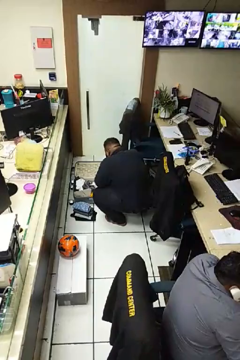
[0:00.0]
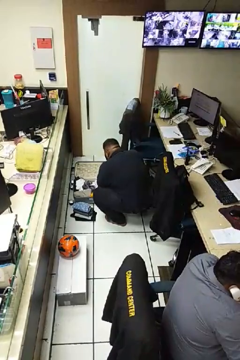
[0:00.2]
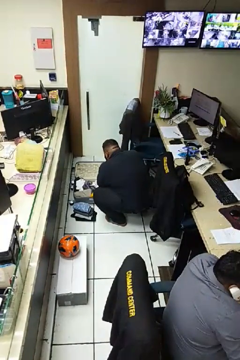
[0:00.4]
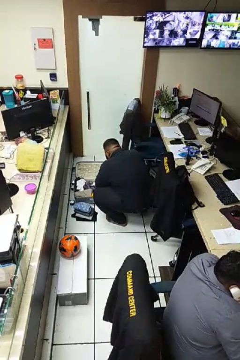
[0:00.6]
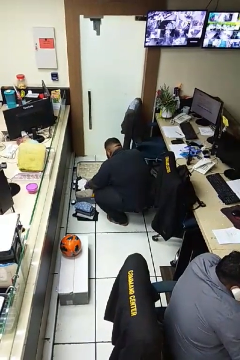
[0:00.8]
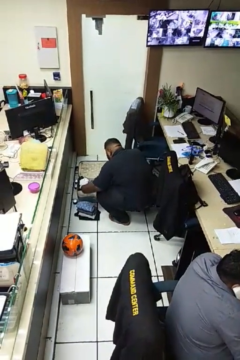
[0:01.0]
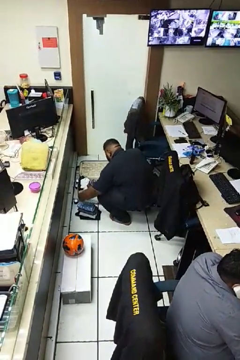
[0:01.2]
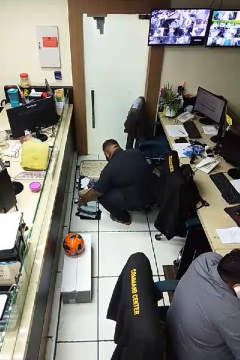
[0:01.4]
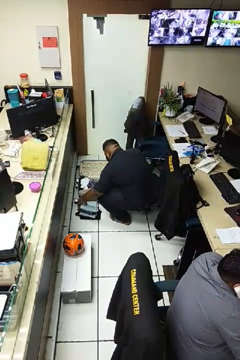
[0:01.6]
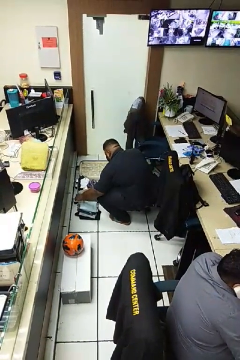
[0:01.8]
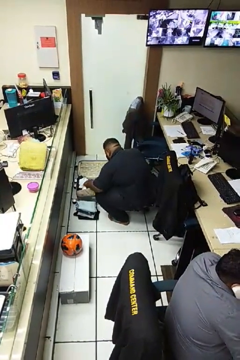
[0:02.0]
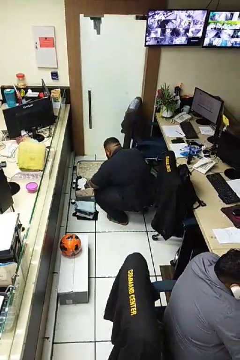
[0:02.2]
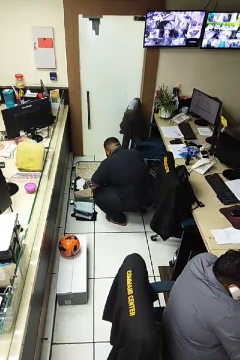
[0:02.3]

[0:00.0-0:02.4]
person unloads clothes from suitcase

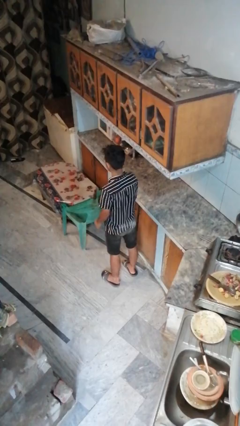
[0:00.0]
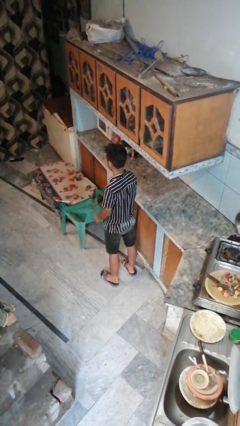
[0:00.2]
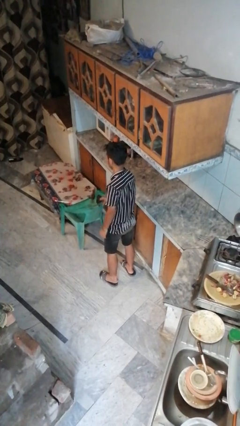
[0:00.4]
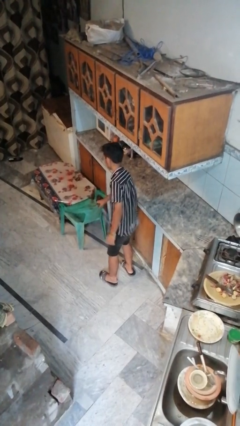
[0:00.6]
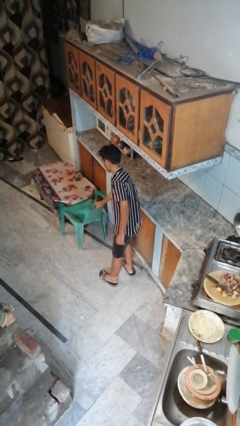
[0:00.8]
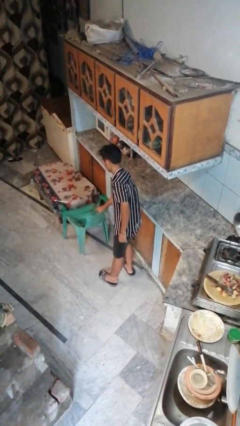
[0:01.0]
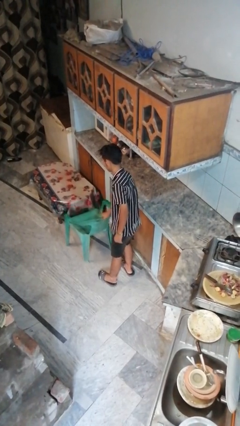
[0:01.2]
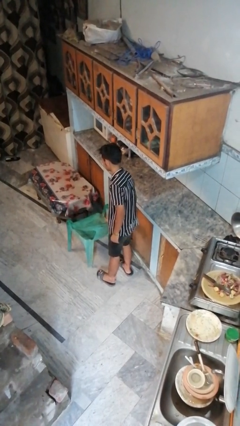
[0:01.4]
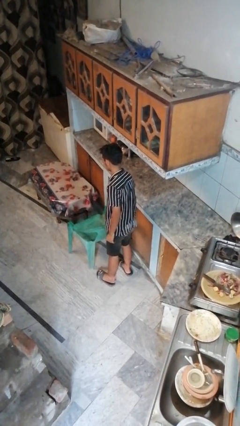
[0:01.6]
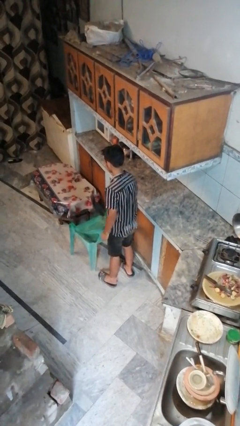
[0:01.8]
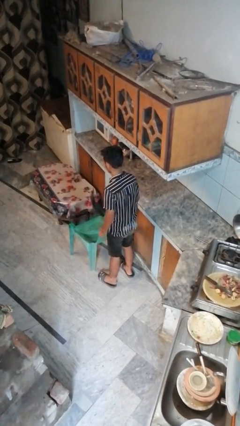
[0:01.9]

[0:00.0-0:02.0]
person pulls out chair

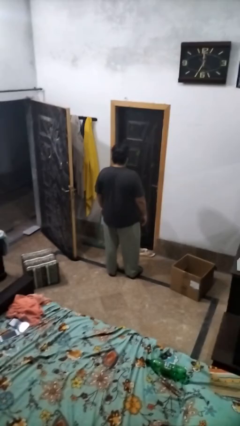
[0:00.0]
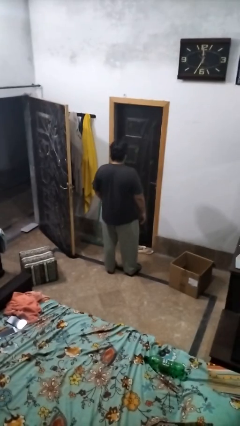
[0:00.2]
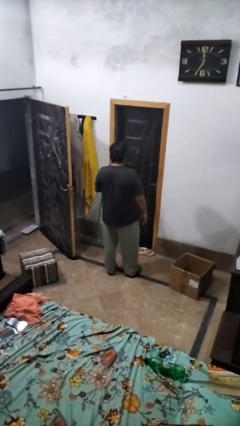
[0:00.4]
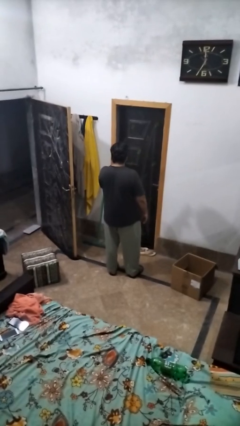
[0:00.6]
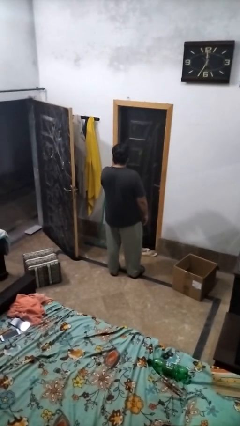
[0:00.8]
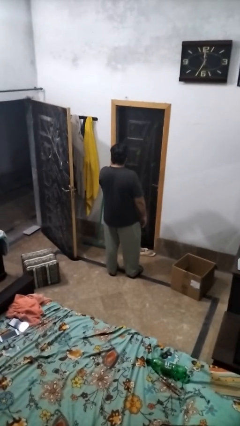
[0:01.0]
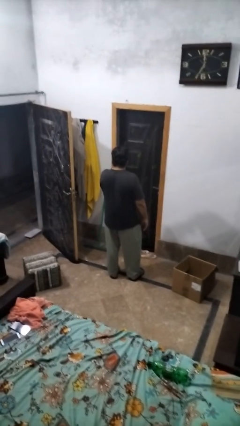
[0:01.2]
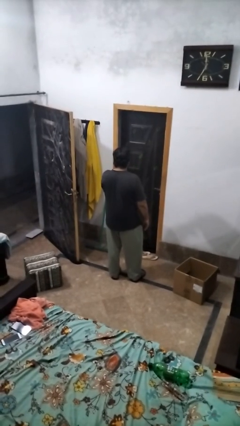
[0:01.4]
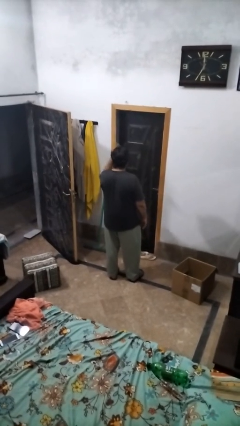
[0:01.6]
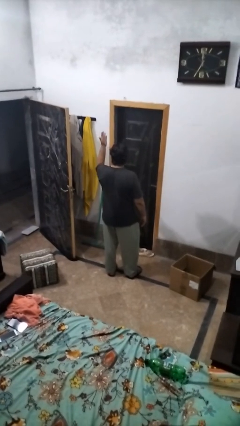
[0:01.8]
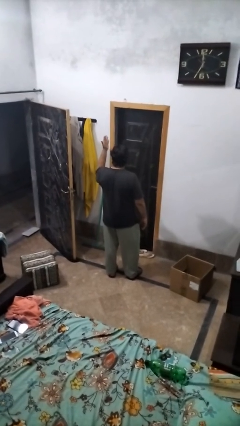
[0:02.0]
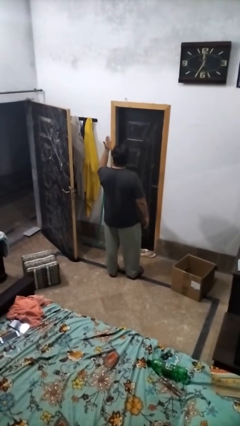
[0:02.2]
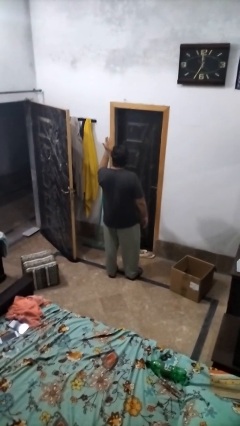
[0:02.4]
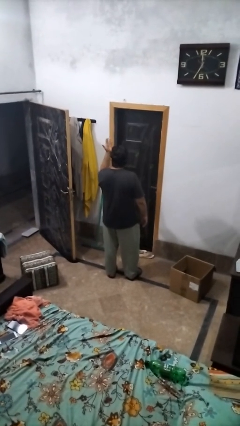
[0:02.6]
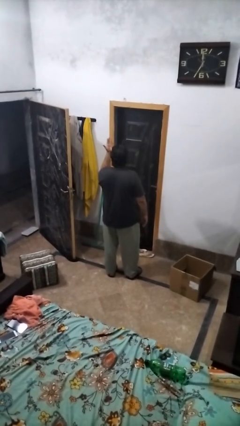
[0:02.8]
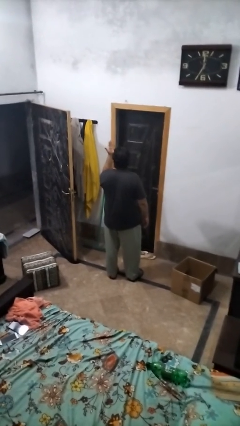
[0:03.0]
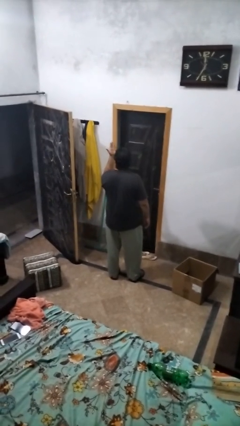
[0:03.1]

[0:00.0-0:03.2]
person gestures blow kiss

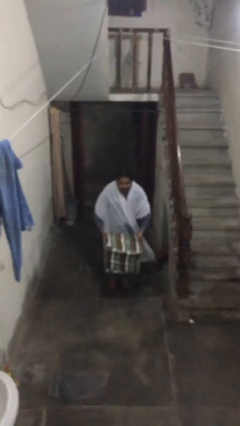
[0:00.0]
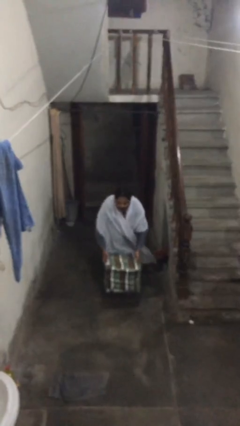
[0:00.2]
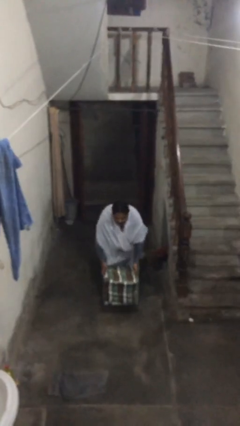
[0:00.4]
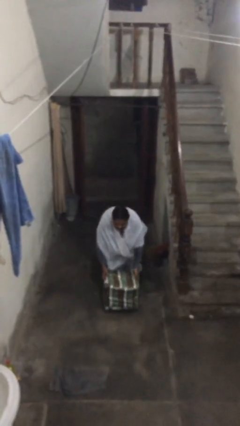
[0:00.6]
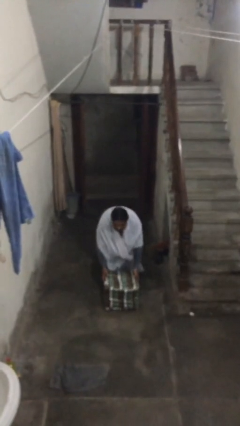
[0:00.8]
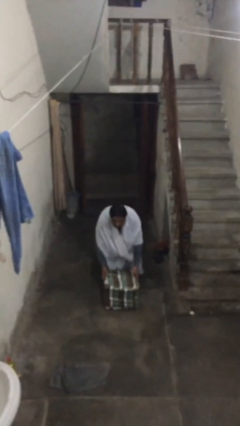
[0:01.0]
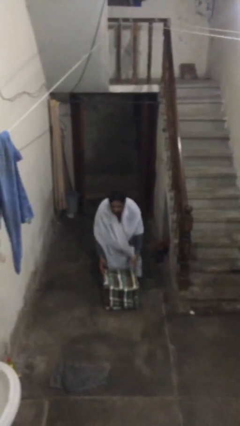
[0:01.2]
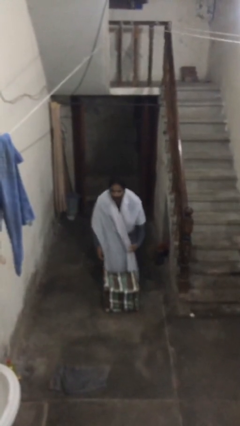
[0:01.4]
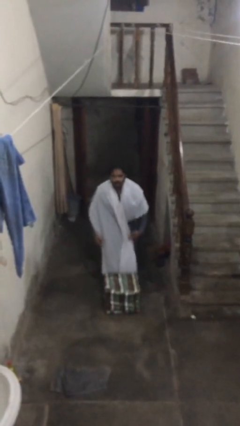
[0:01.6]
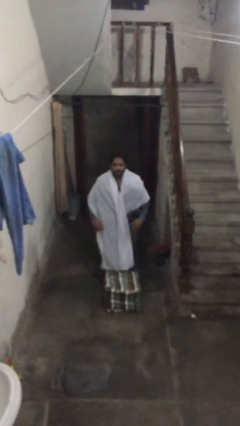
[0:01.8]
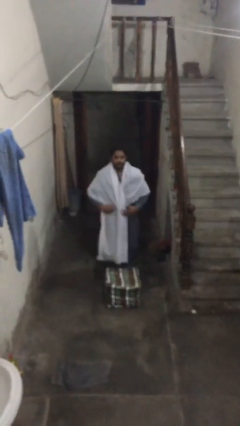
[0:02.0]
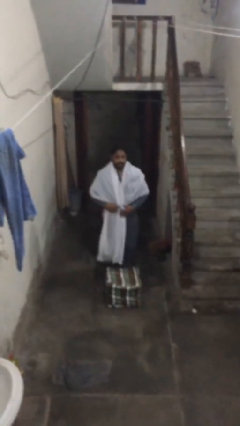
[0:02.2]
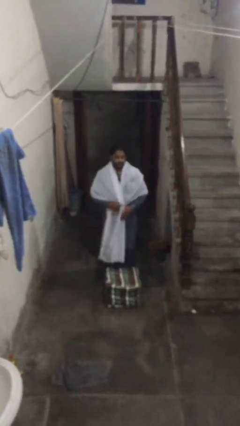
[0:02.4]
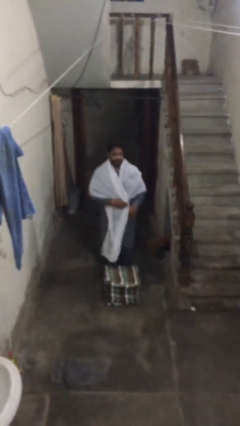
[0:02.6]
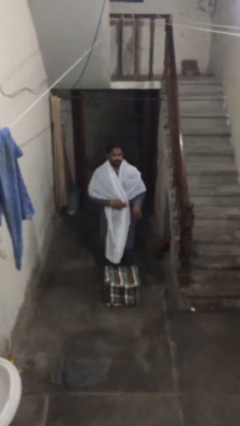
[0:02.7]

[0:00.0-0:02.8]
person puts down object on floor

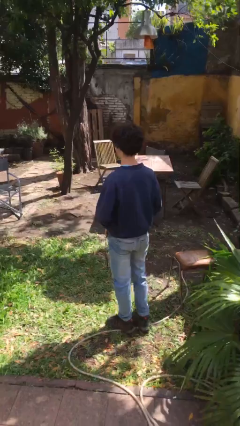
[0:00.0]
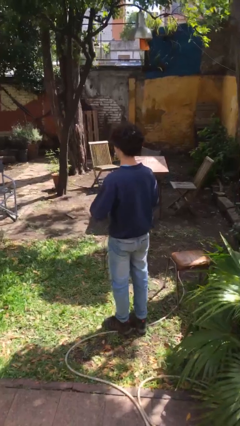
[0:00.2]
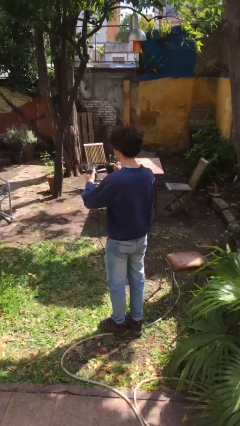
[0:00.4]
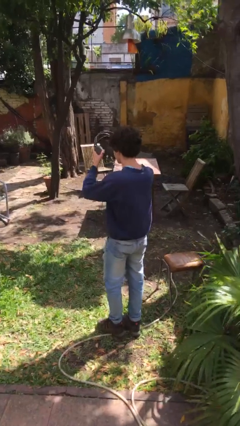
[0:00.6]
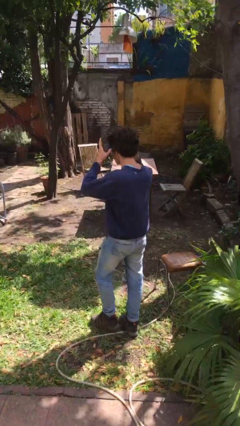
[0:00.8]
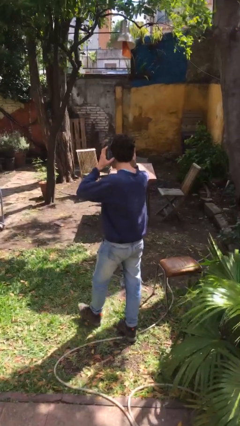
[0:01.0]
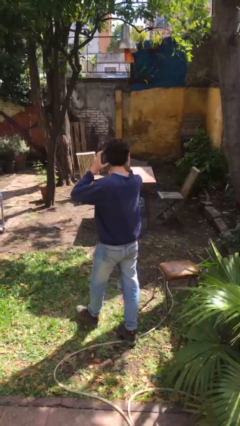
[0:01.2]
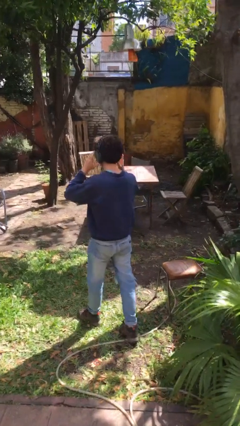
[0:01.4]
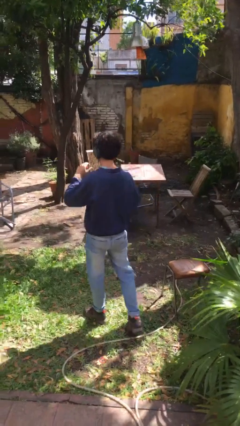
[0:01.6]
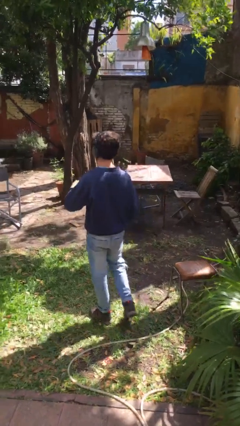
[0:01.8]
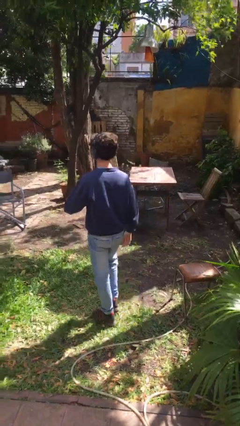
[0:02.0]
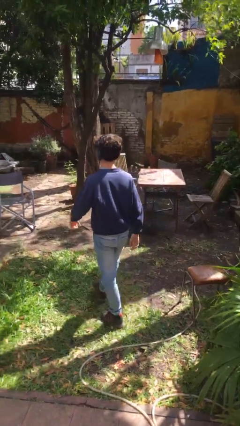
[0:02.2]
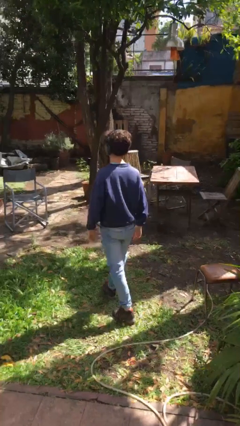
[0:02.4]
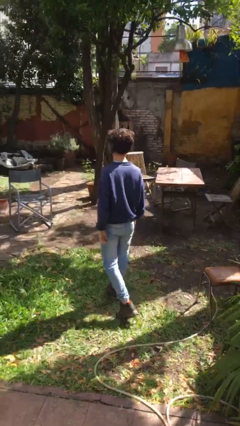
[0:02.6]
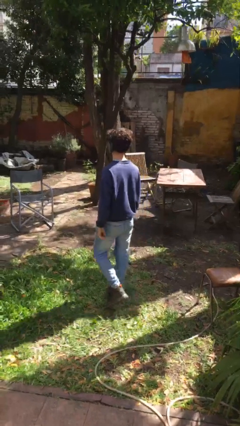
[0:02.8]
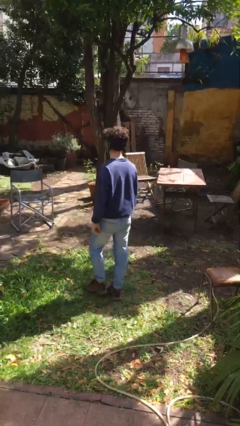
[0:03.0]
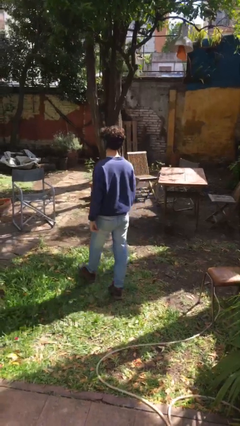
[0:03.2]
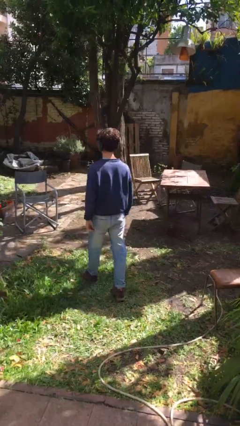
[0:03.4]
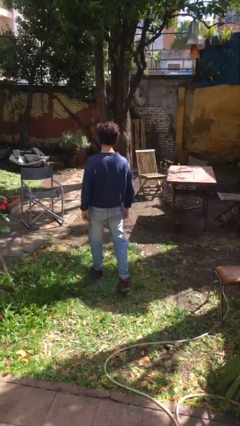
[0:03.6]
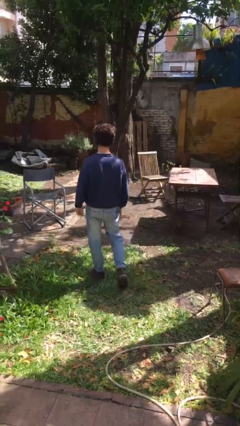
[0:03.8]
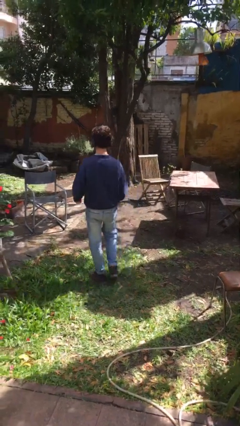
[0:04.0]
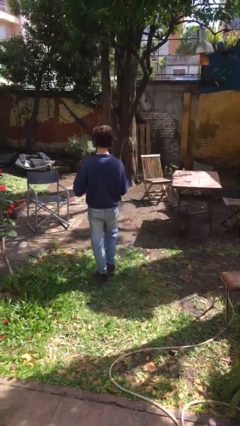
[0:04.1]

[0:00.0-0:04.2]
person puts on headphones

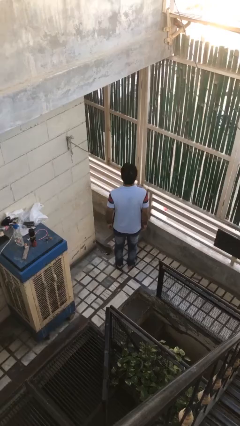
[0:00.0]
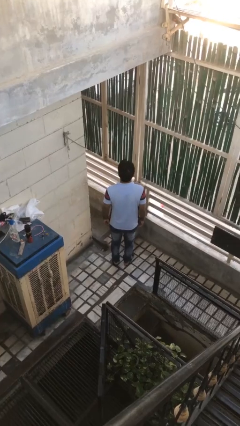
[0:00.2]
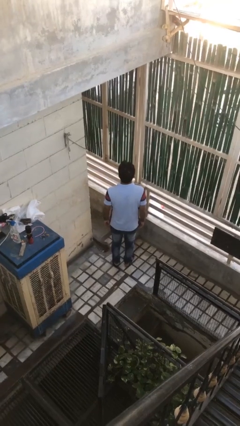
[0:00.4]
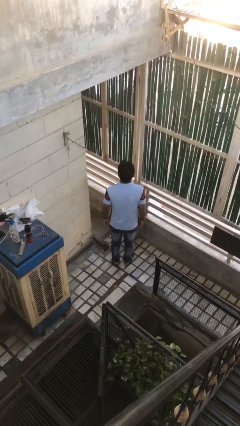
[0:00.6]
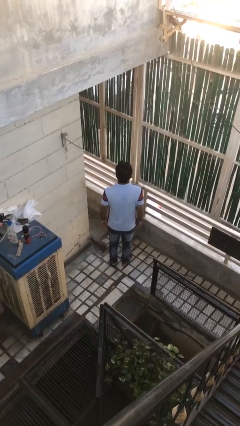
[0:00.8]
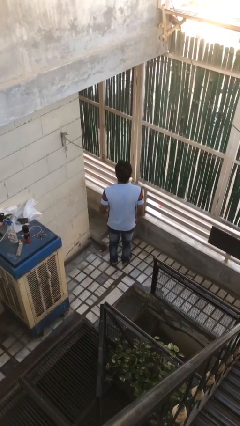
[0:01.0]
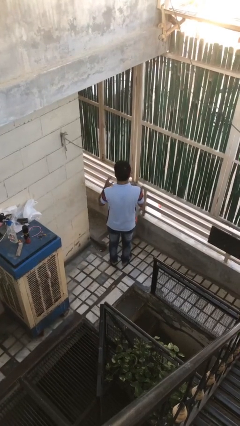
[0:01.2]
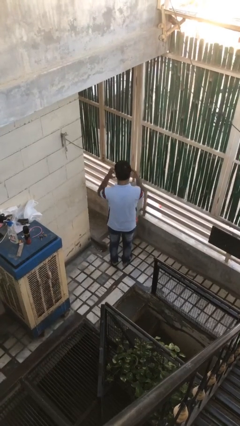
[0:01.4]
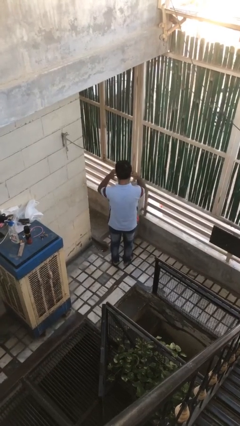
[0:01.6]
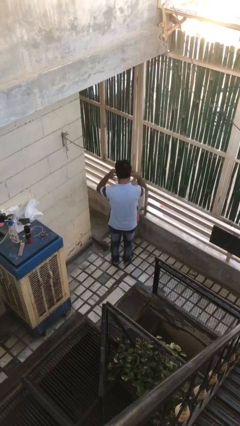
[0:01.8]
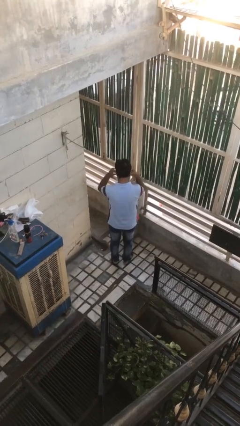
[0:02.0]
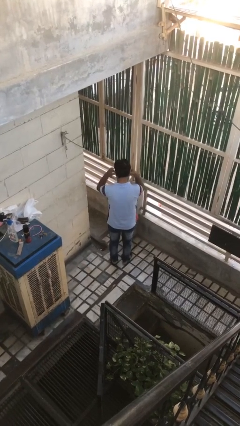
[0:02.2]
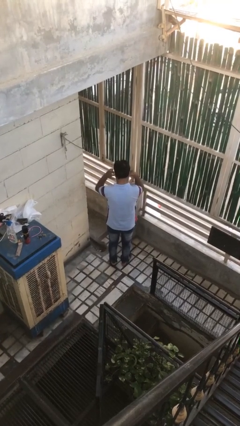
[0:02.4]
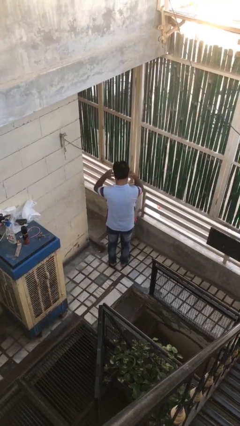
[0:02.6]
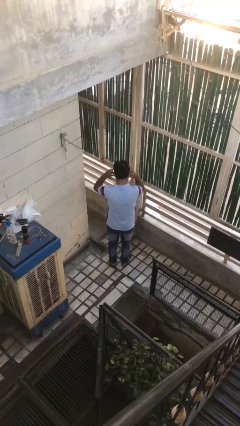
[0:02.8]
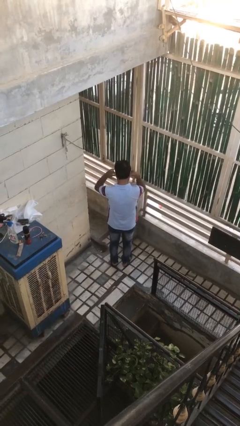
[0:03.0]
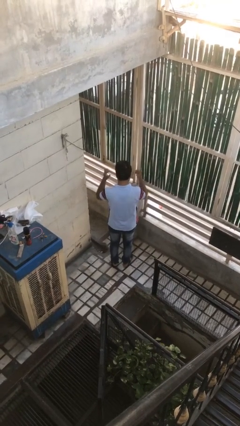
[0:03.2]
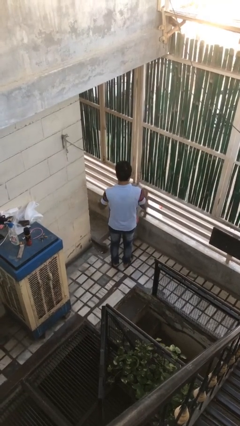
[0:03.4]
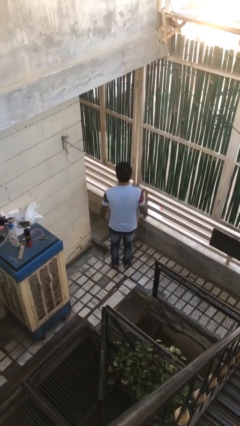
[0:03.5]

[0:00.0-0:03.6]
person puts fingers in ear
